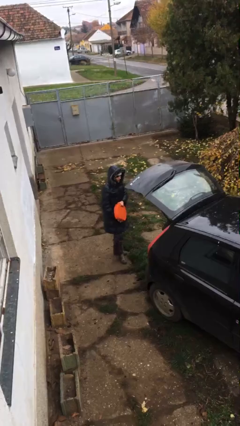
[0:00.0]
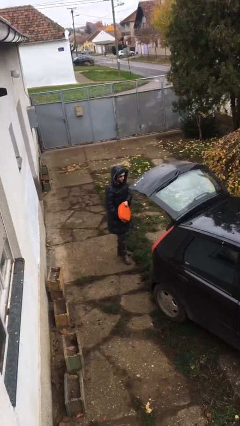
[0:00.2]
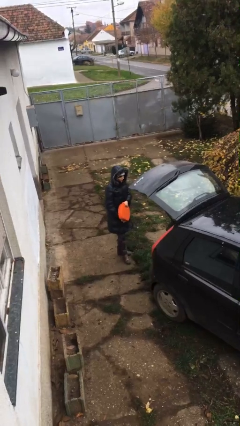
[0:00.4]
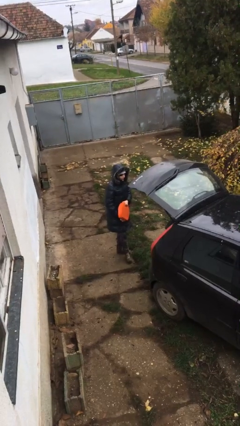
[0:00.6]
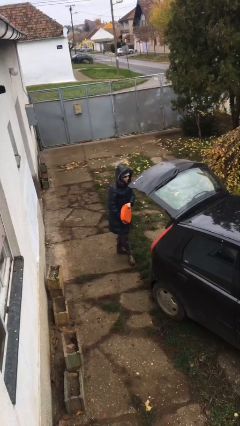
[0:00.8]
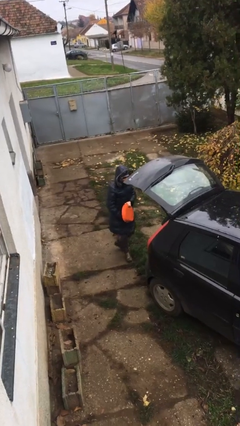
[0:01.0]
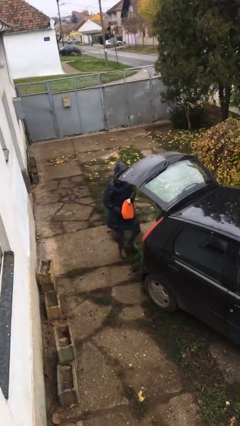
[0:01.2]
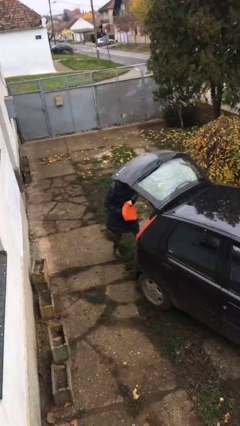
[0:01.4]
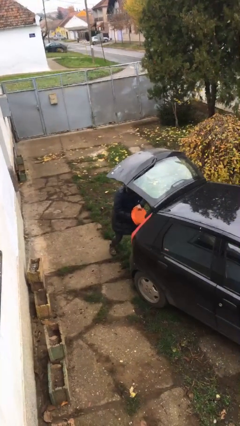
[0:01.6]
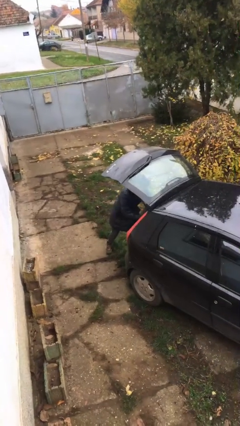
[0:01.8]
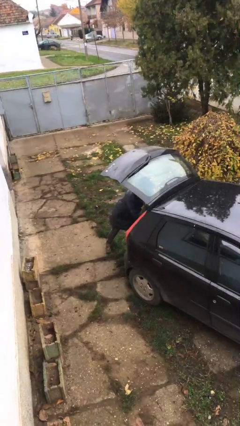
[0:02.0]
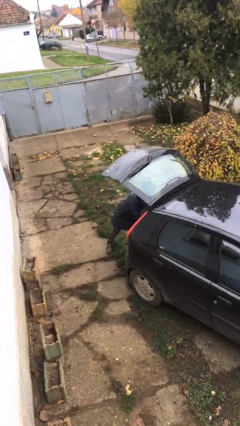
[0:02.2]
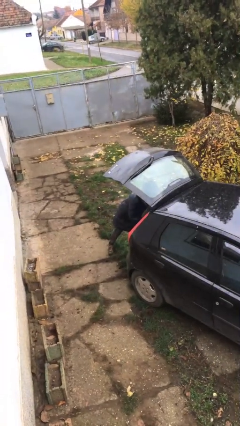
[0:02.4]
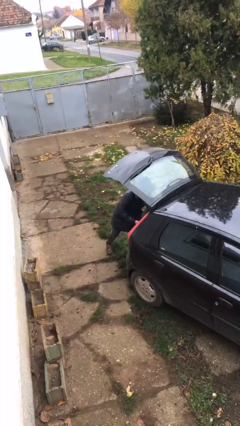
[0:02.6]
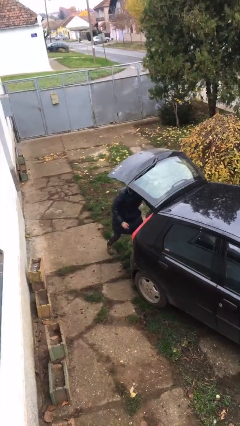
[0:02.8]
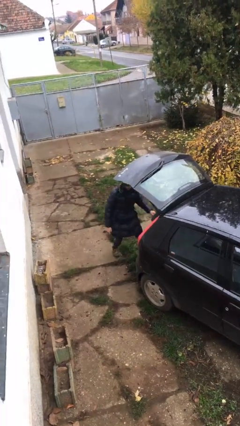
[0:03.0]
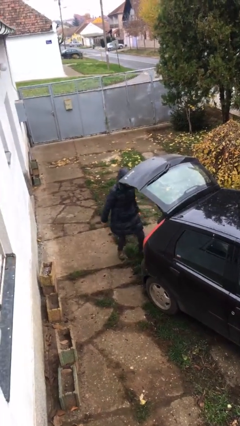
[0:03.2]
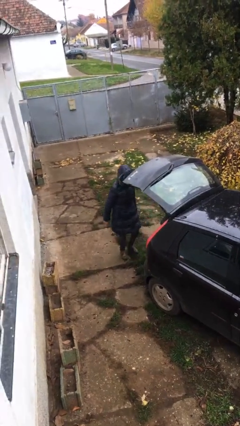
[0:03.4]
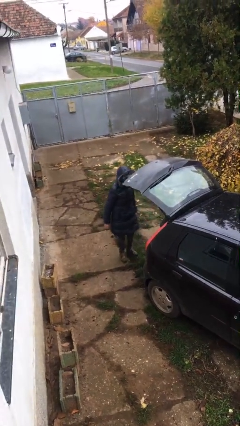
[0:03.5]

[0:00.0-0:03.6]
person loads car

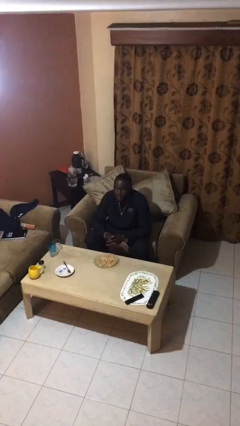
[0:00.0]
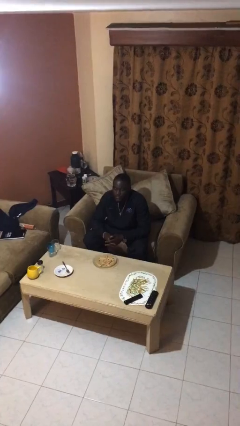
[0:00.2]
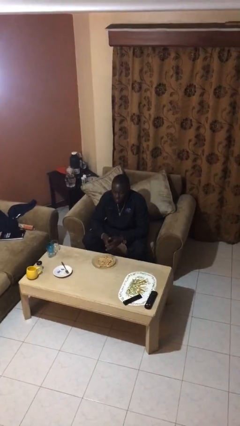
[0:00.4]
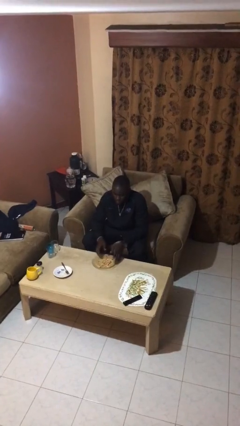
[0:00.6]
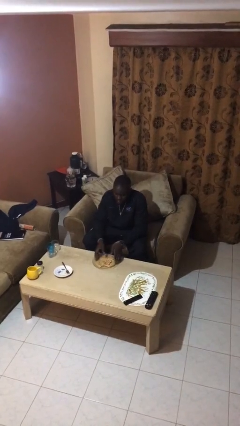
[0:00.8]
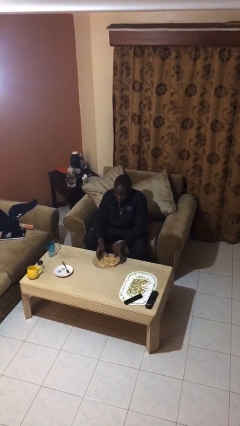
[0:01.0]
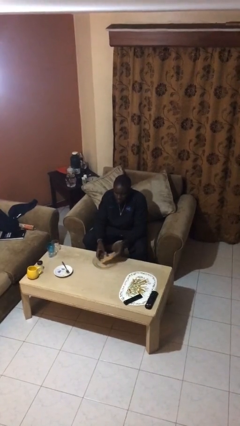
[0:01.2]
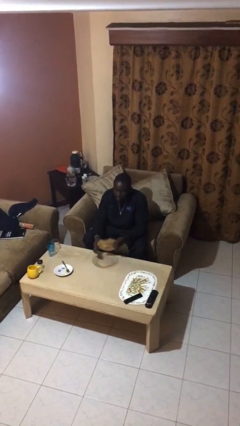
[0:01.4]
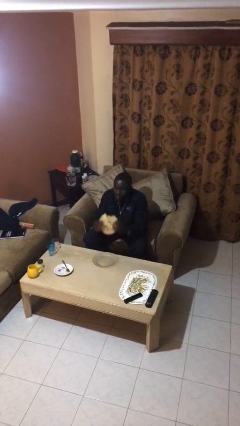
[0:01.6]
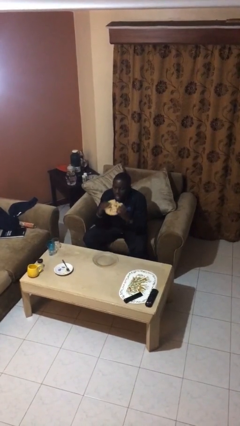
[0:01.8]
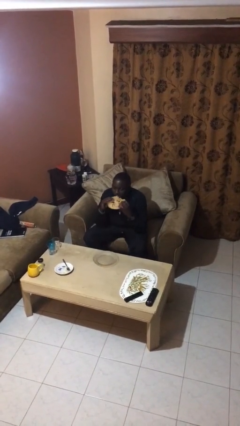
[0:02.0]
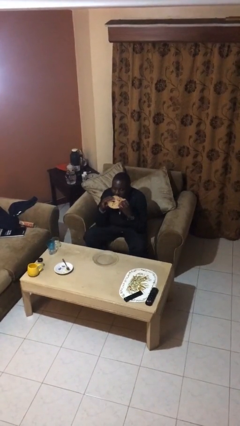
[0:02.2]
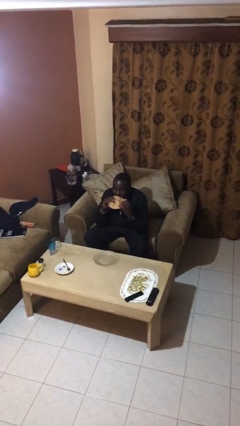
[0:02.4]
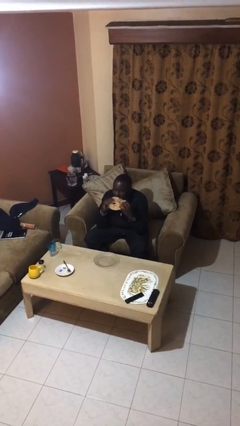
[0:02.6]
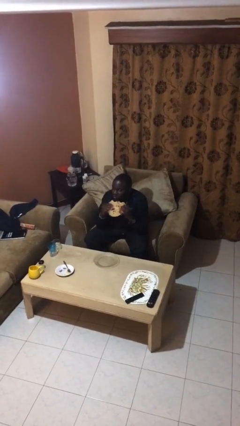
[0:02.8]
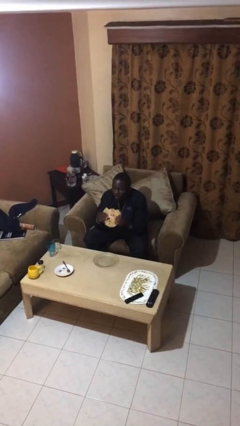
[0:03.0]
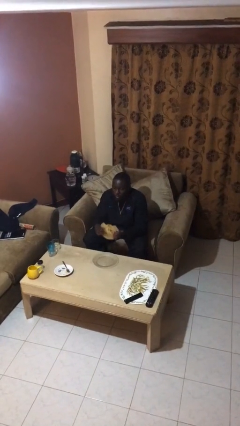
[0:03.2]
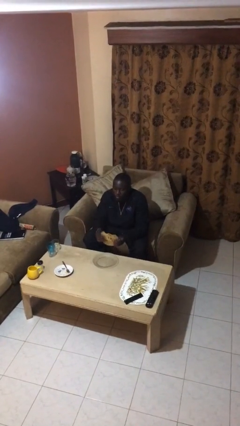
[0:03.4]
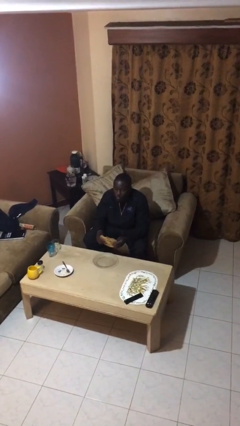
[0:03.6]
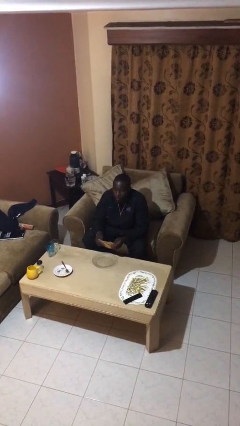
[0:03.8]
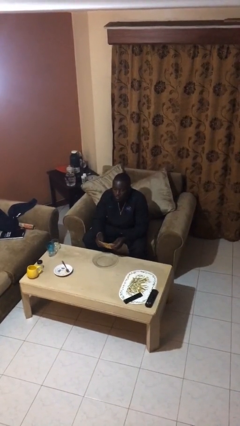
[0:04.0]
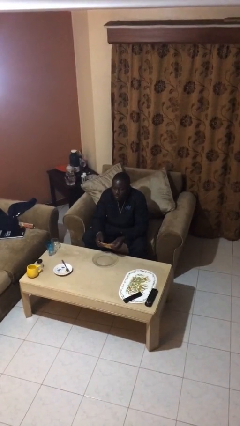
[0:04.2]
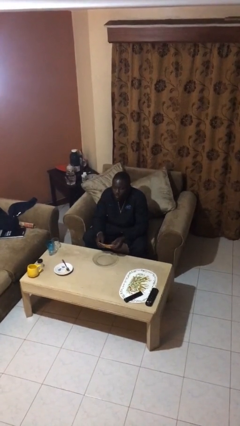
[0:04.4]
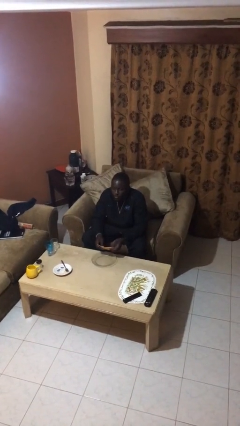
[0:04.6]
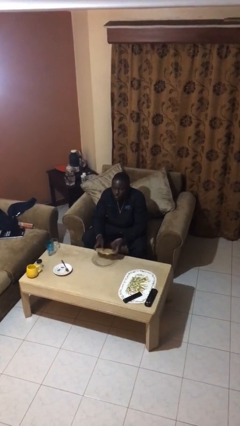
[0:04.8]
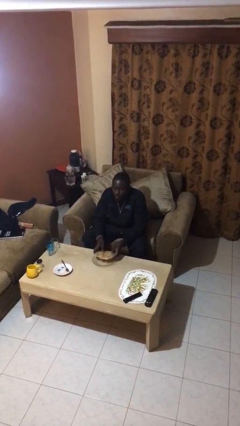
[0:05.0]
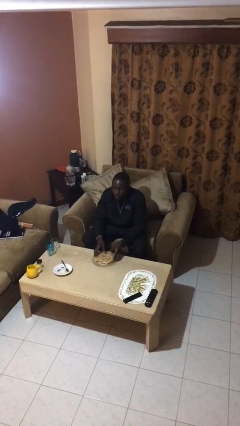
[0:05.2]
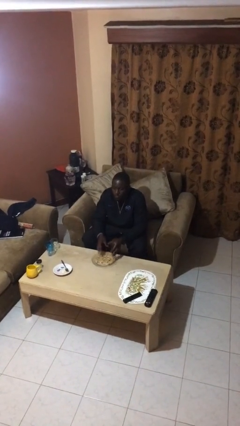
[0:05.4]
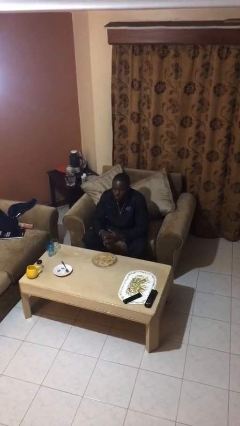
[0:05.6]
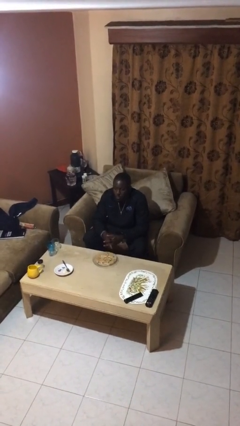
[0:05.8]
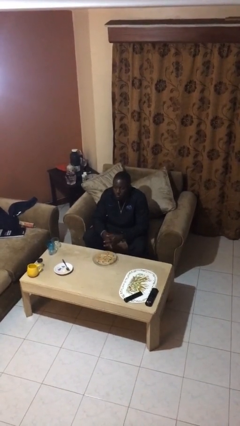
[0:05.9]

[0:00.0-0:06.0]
person eats with hands

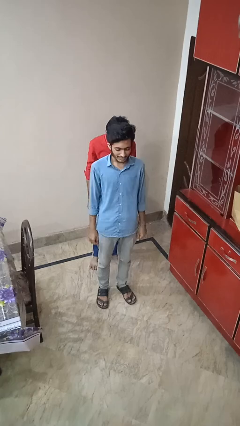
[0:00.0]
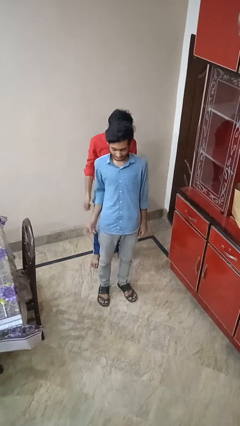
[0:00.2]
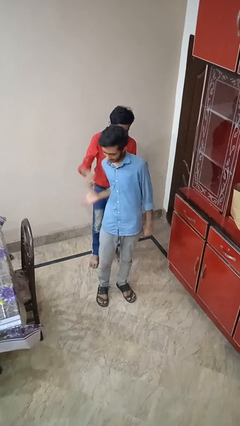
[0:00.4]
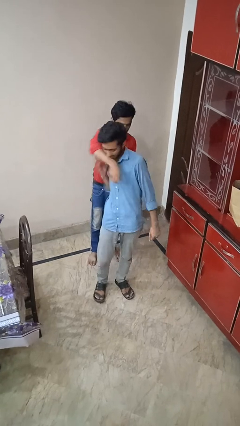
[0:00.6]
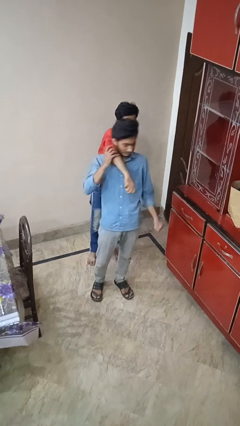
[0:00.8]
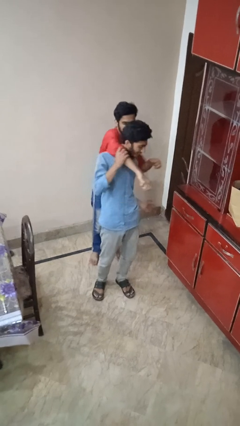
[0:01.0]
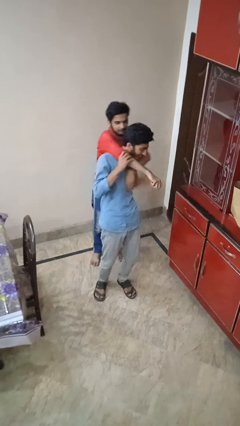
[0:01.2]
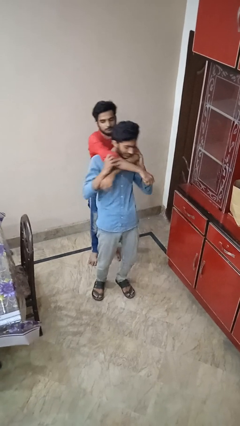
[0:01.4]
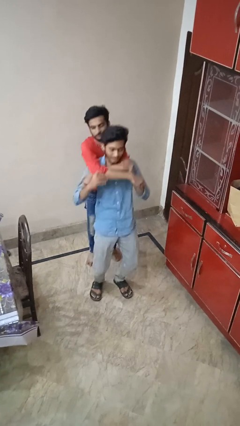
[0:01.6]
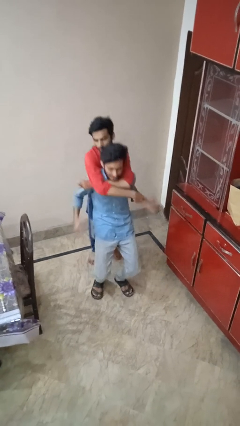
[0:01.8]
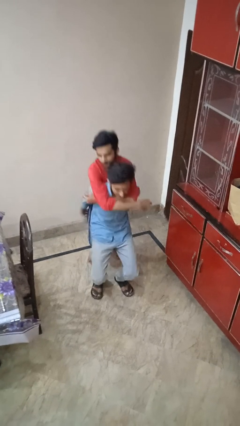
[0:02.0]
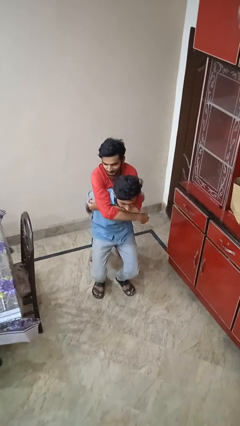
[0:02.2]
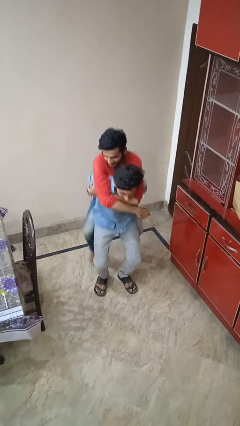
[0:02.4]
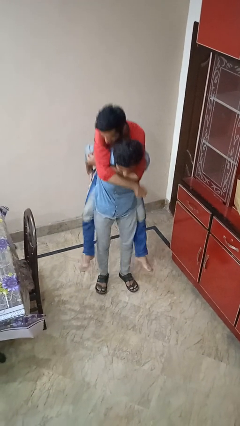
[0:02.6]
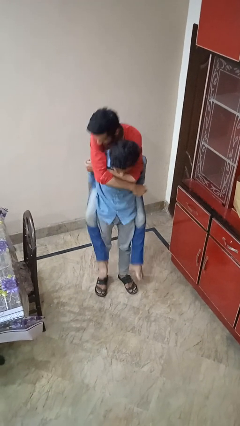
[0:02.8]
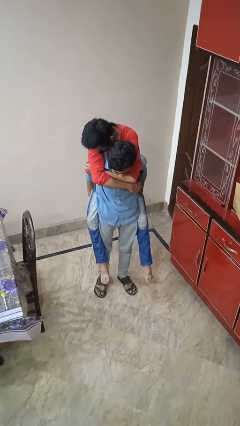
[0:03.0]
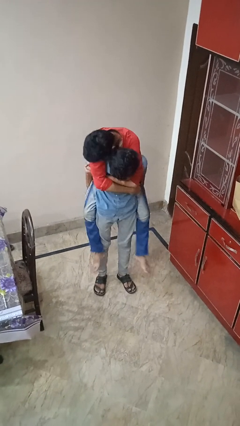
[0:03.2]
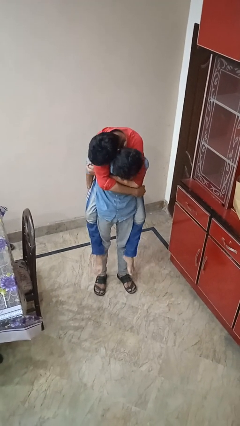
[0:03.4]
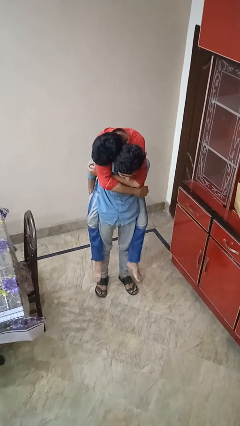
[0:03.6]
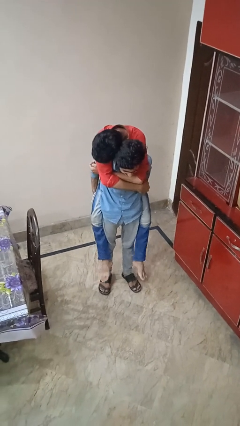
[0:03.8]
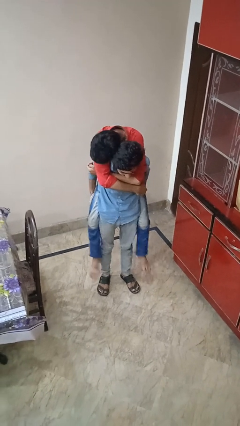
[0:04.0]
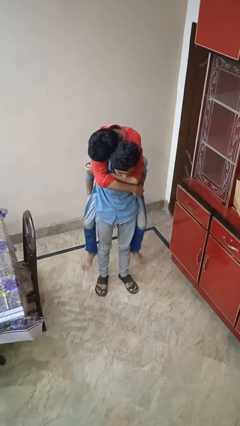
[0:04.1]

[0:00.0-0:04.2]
person carries person over shoulder

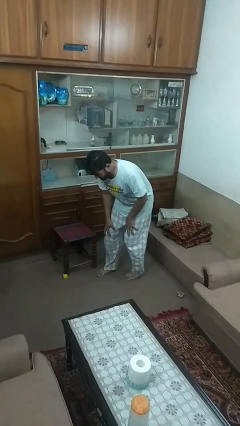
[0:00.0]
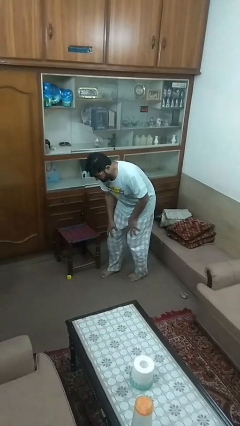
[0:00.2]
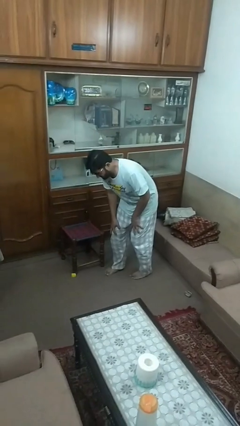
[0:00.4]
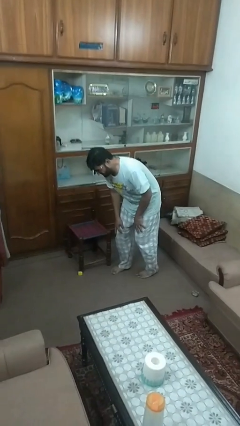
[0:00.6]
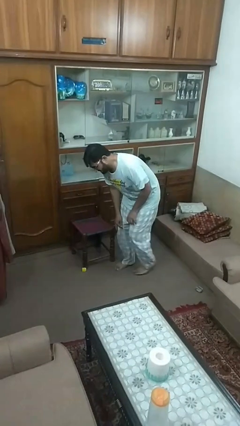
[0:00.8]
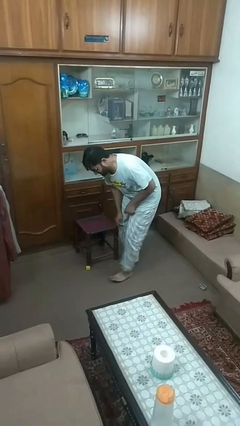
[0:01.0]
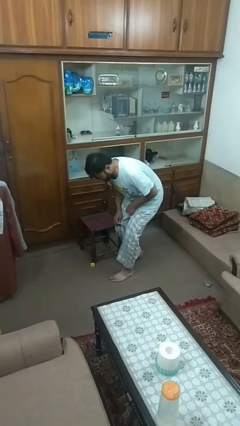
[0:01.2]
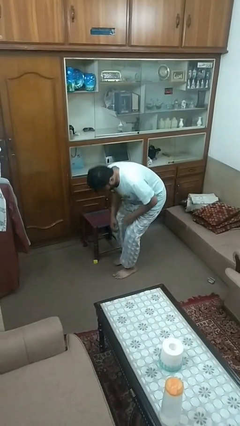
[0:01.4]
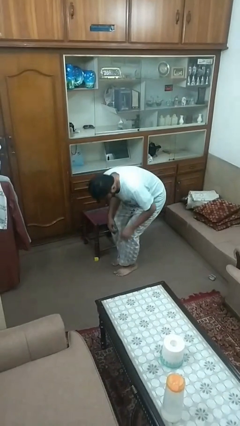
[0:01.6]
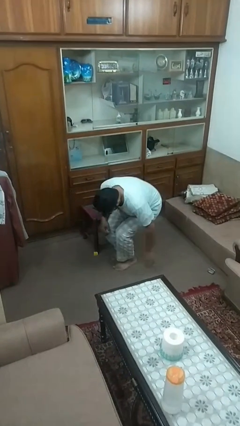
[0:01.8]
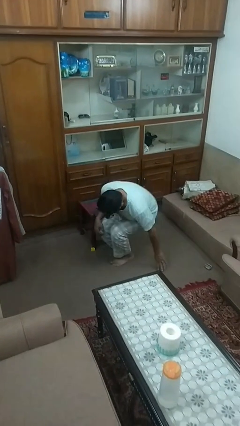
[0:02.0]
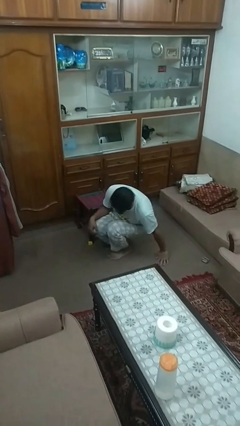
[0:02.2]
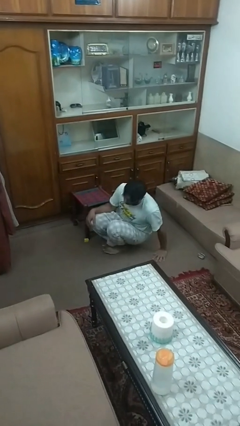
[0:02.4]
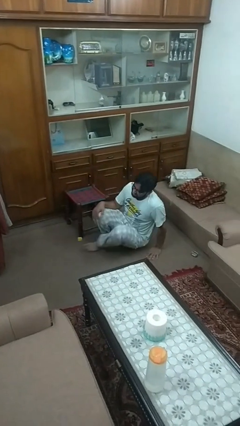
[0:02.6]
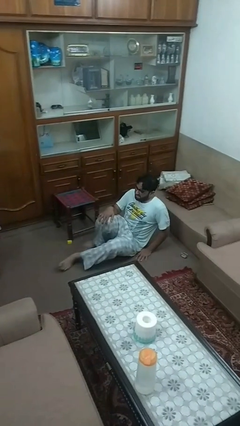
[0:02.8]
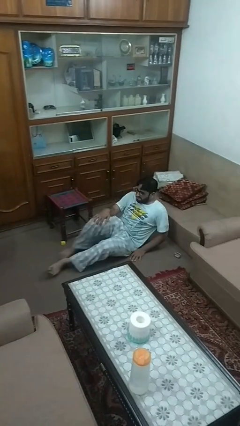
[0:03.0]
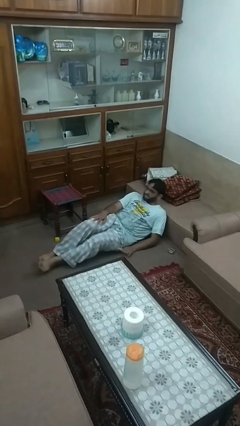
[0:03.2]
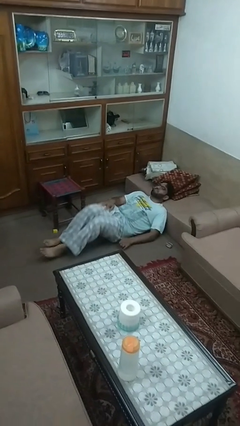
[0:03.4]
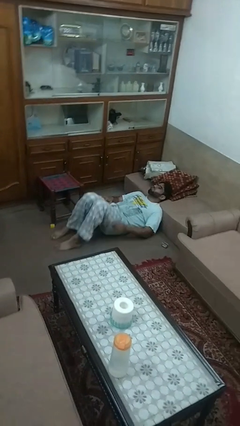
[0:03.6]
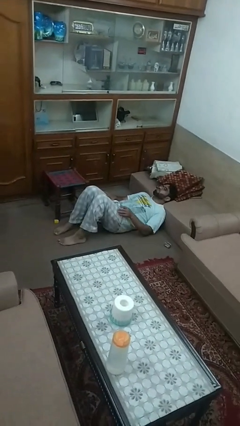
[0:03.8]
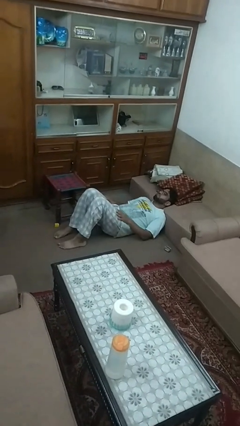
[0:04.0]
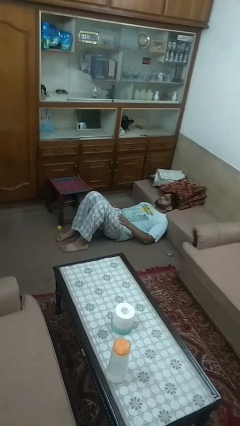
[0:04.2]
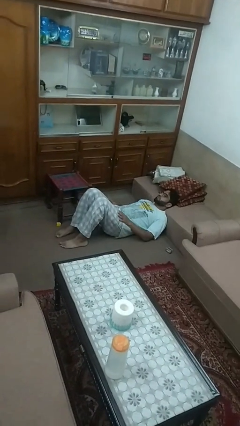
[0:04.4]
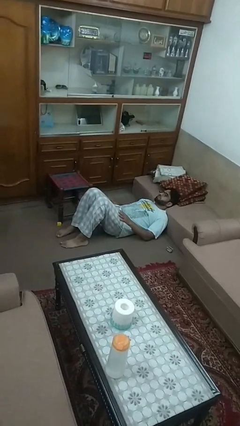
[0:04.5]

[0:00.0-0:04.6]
person lies down on floor
